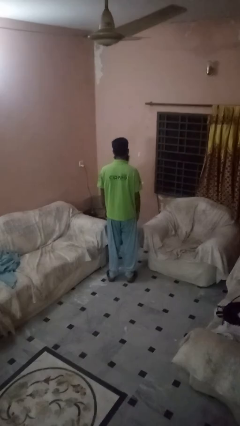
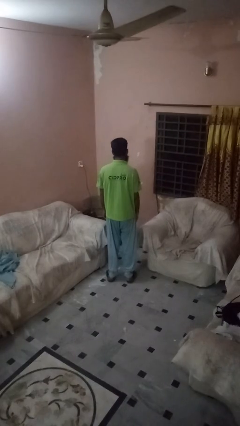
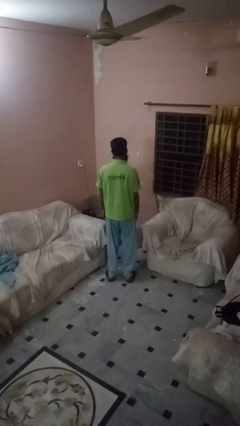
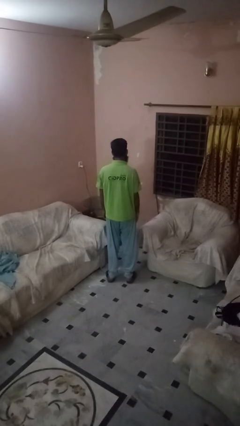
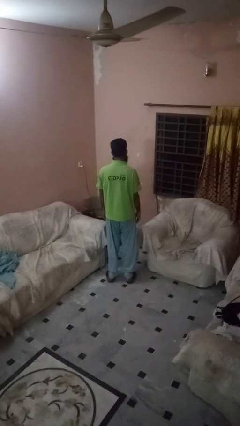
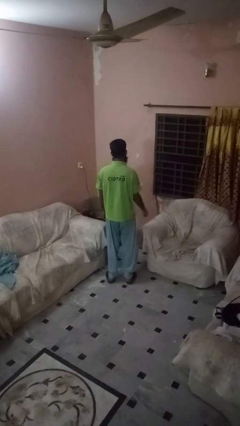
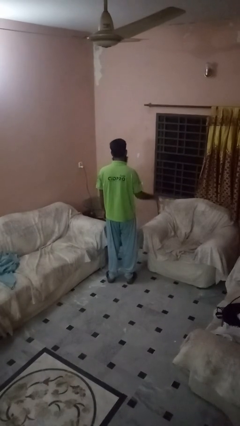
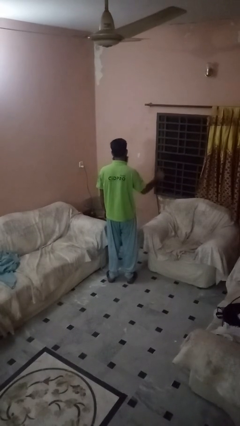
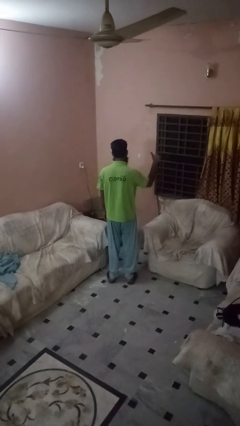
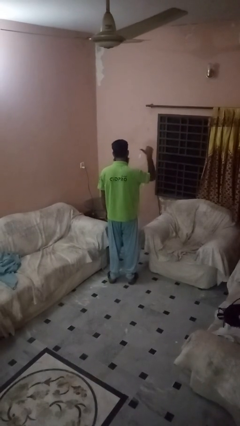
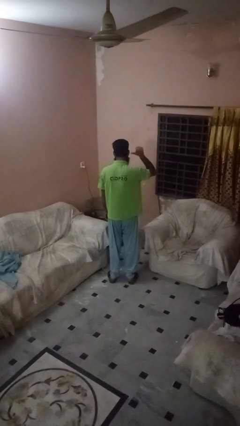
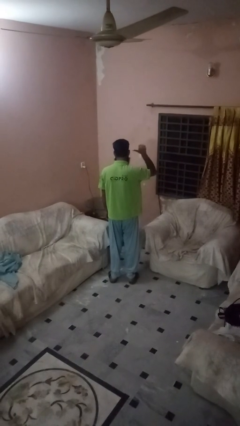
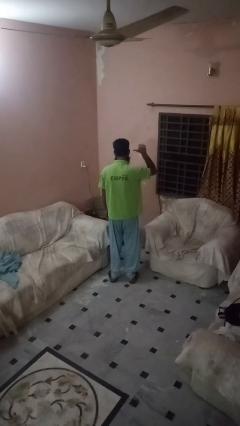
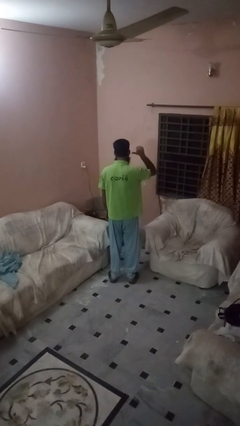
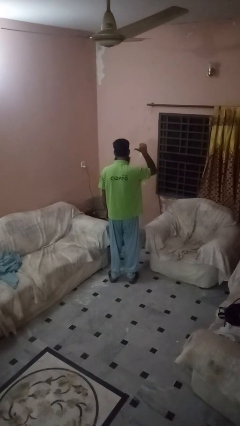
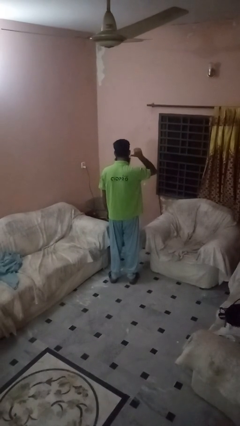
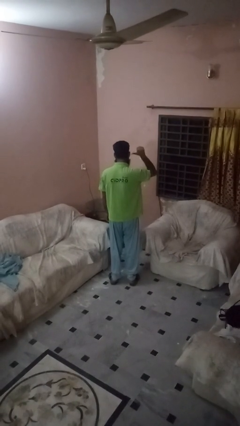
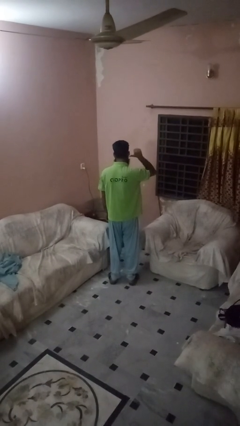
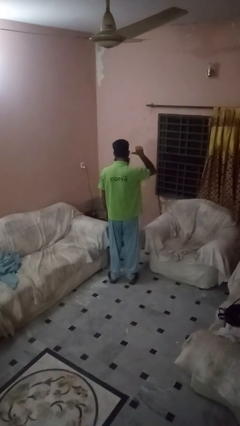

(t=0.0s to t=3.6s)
person gestures behind me

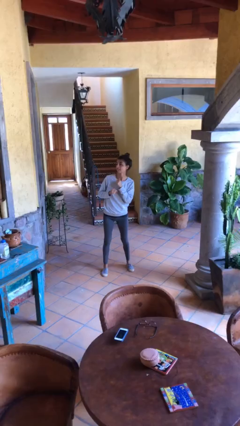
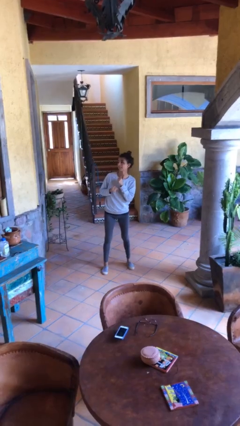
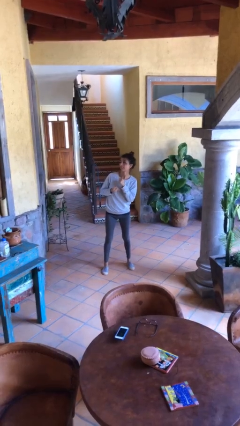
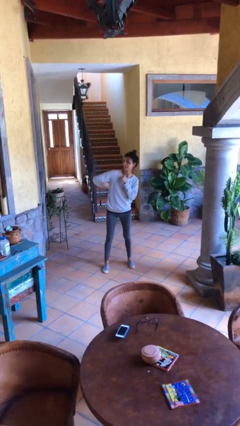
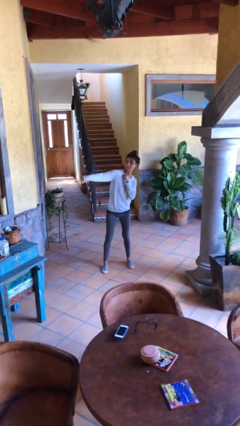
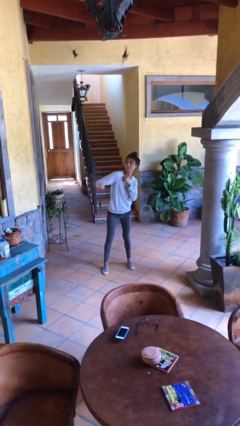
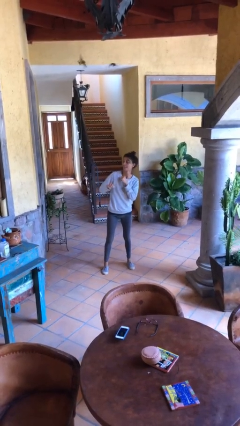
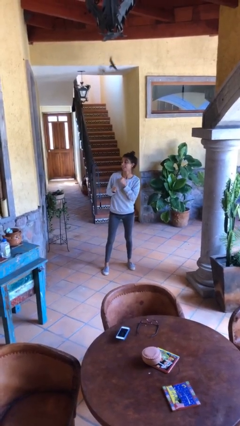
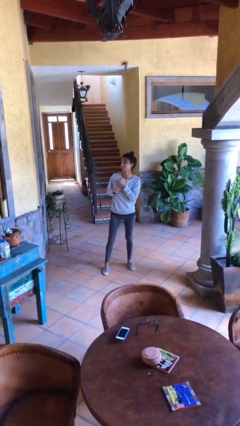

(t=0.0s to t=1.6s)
person karate chop

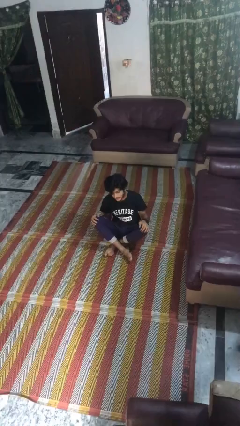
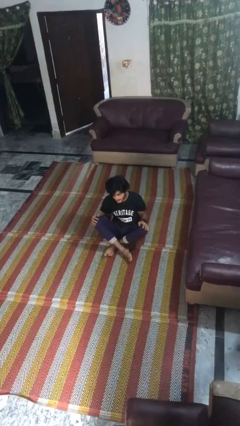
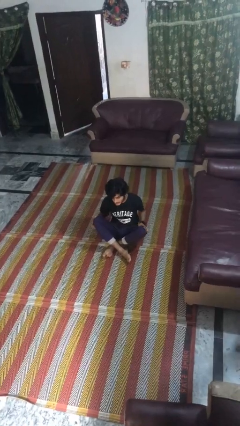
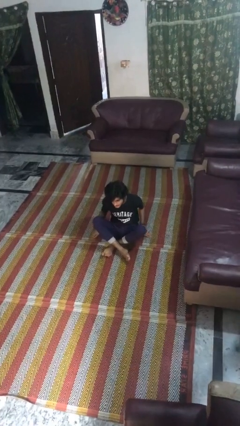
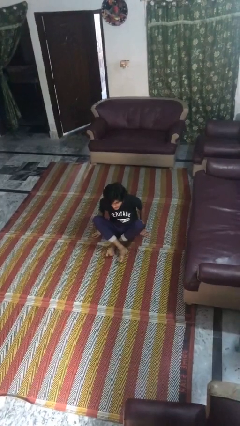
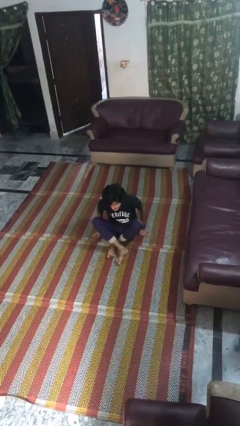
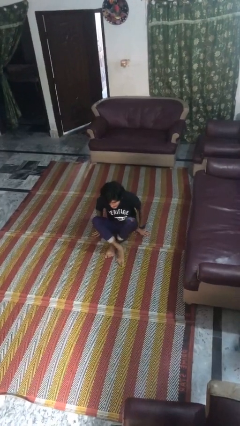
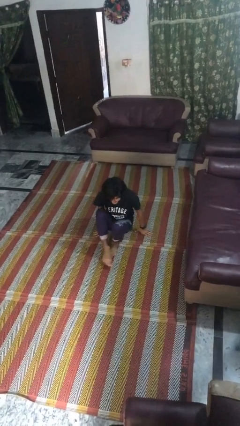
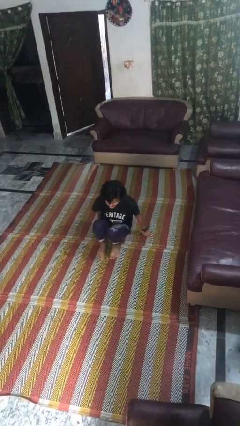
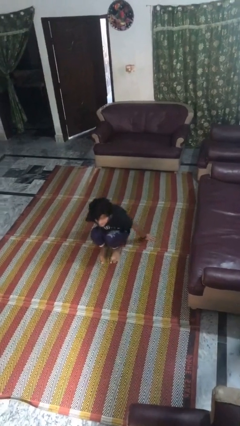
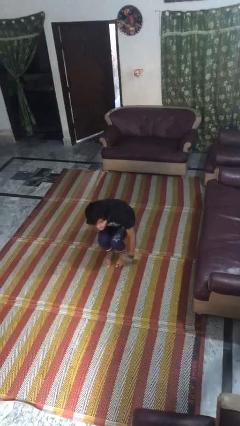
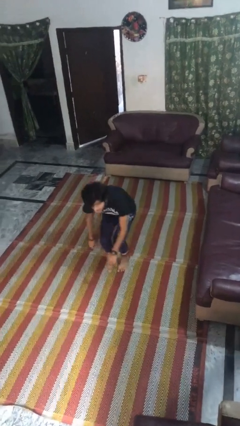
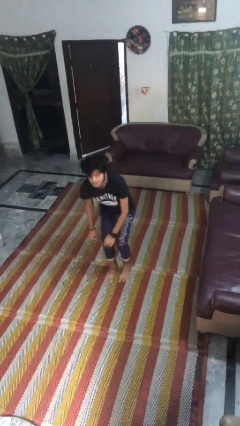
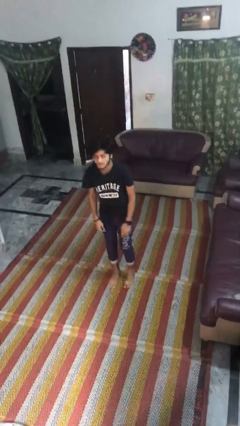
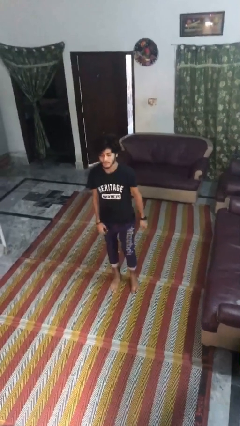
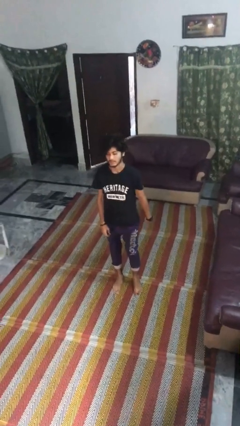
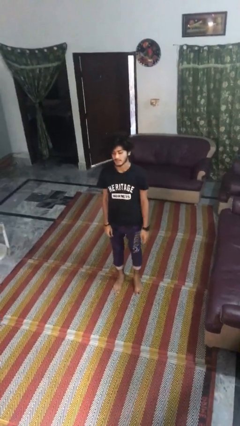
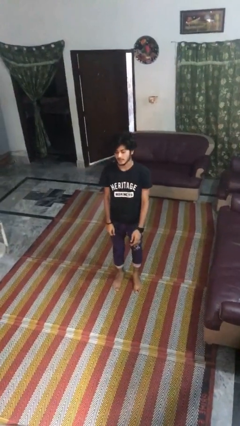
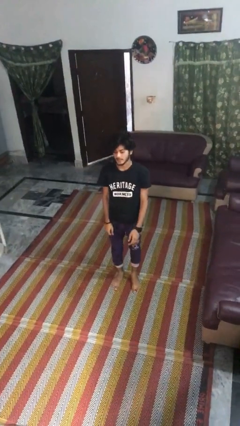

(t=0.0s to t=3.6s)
person stands up from floor

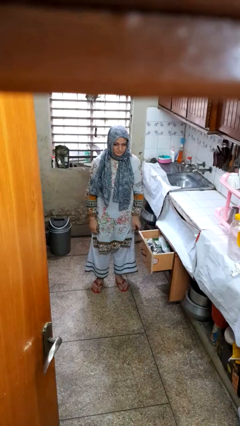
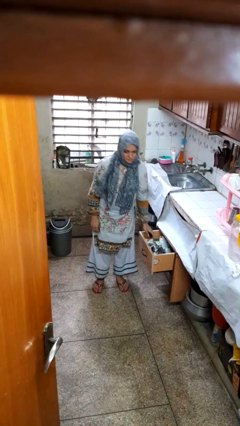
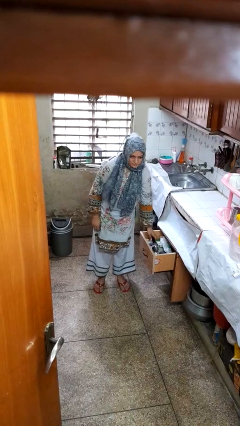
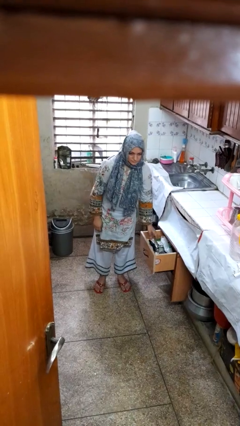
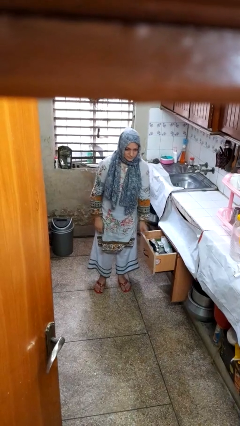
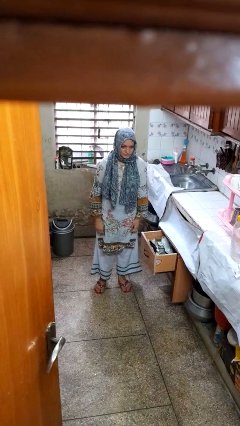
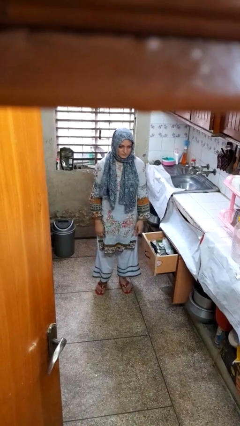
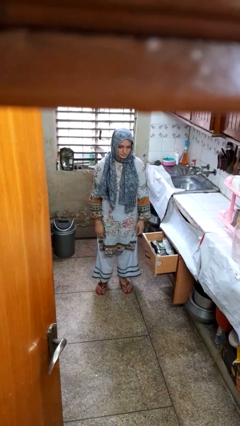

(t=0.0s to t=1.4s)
person puts object into kitchen drawer

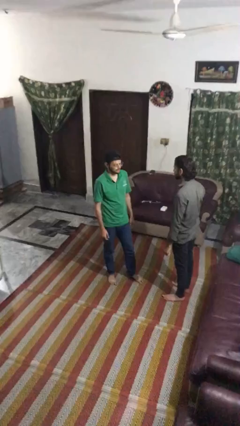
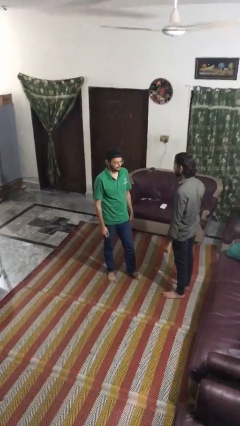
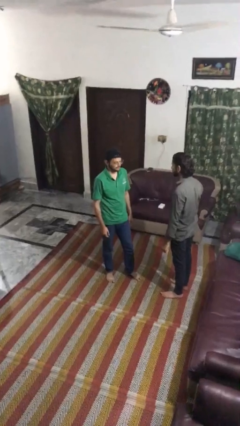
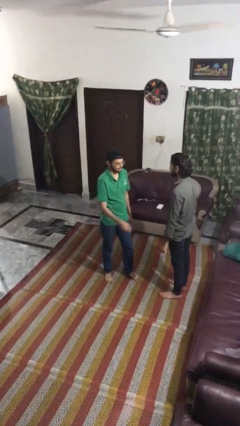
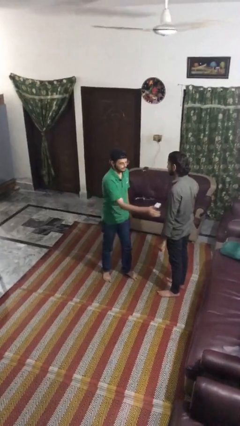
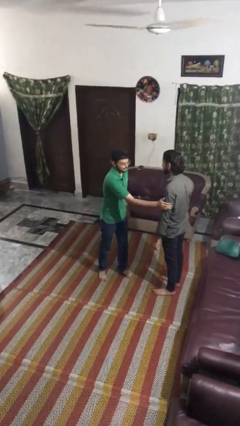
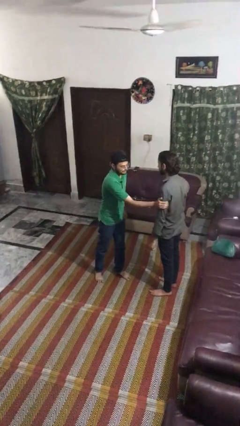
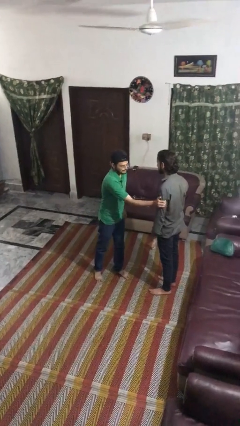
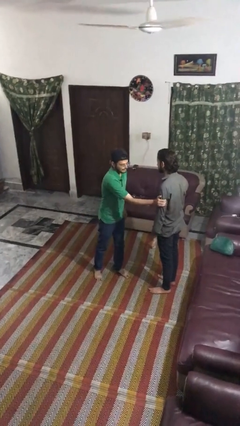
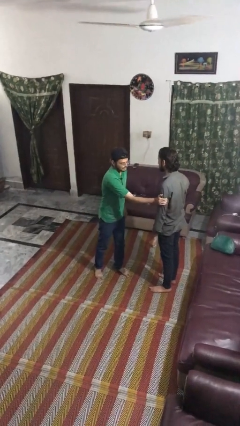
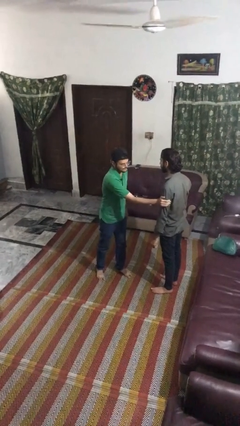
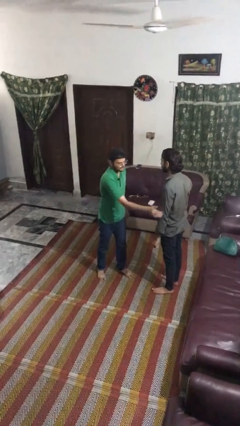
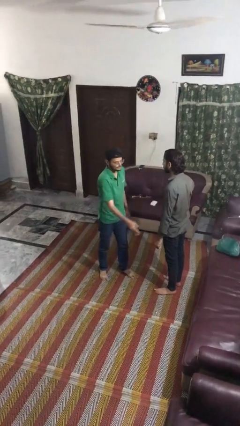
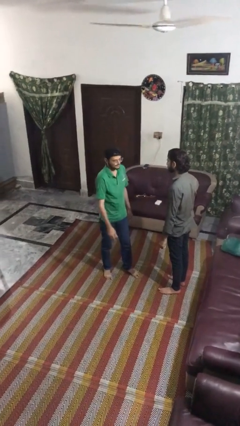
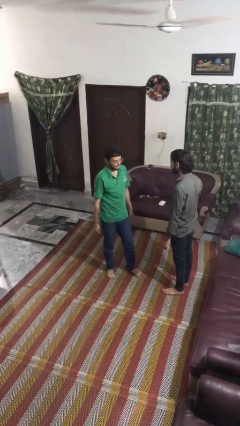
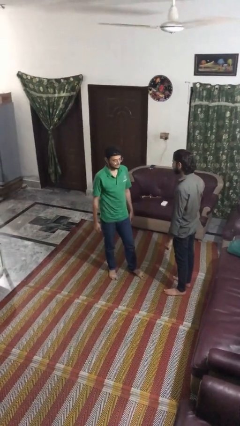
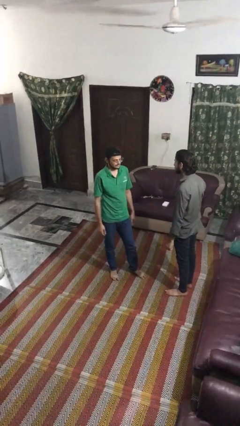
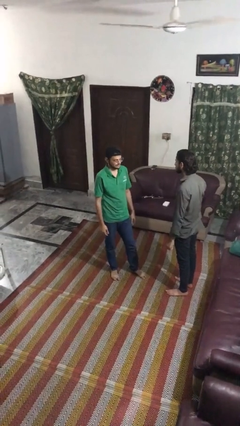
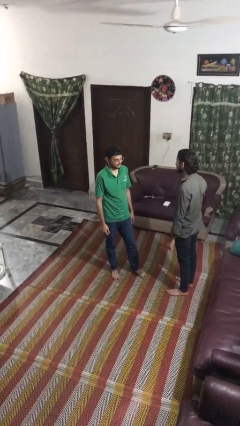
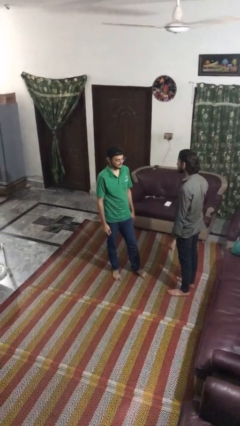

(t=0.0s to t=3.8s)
person grabs person by hair

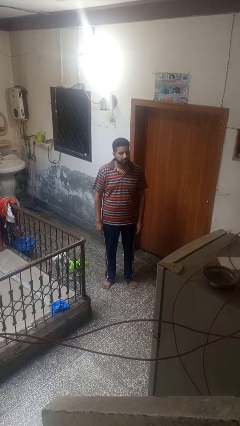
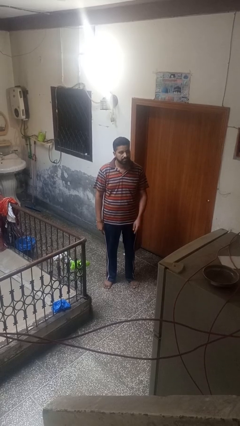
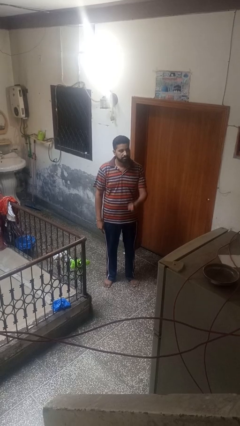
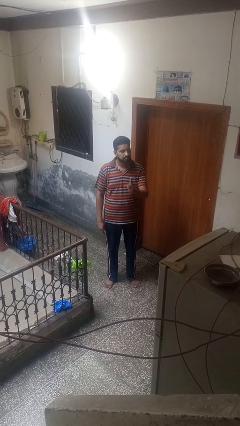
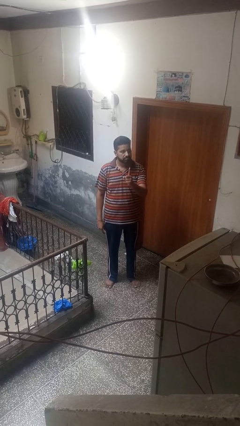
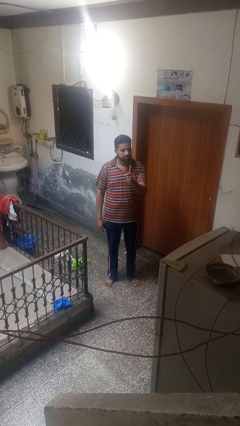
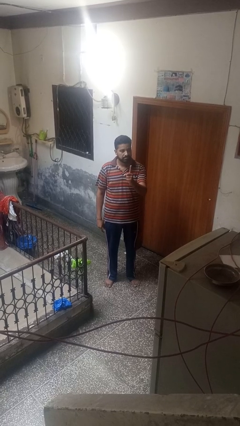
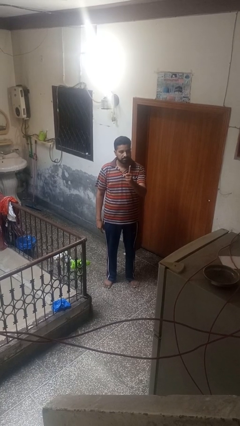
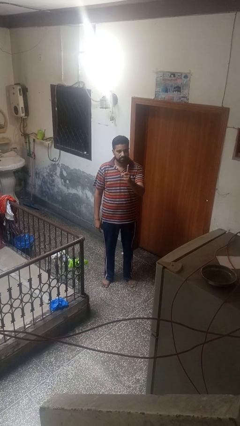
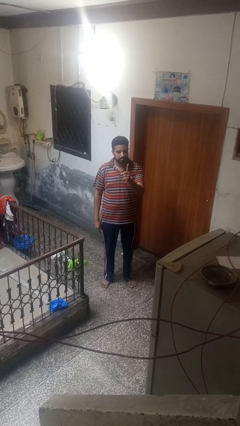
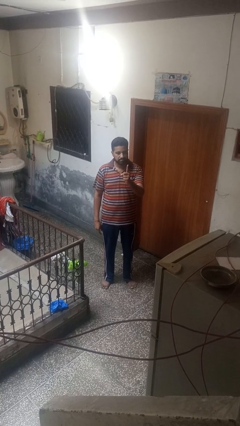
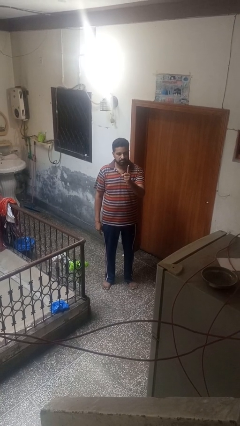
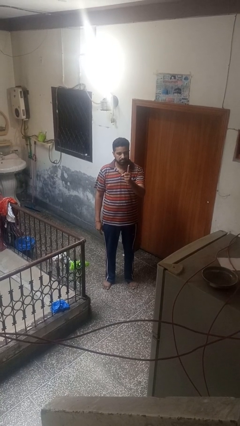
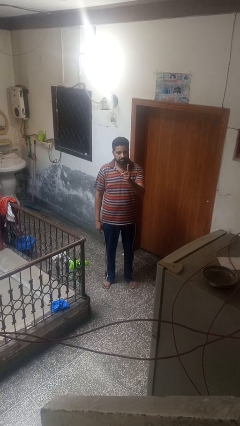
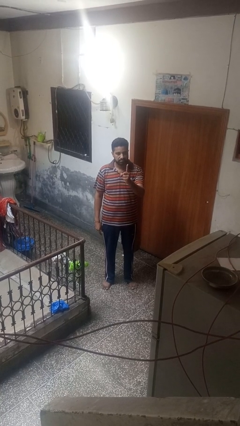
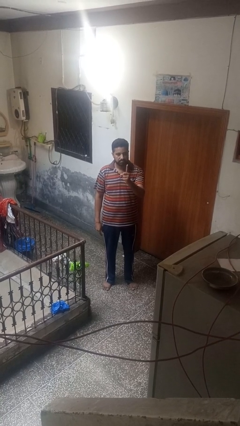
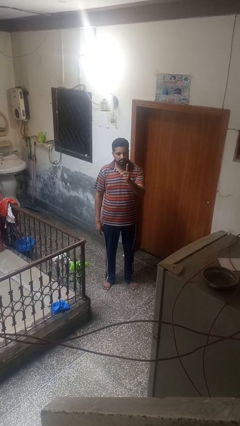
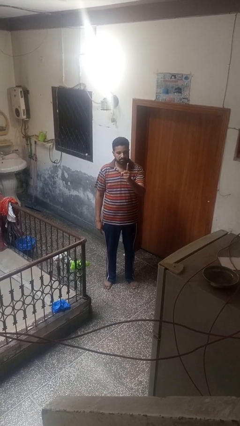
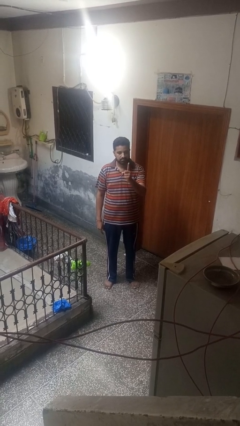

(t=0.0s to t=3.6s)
person gestures number one
